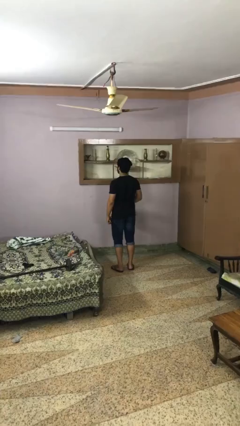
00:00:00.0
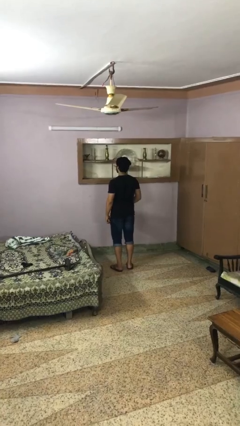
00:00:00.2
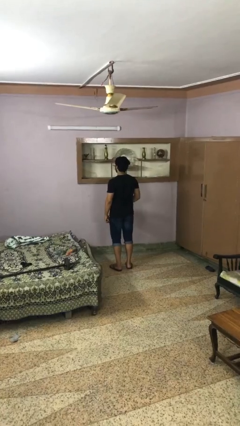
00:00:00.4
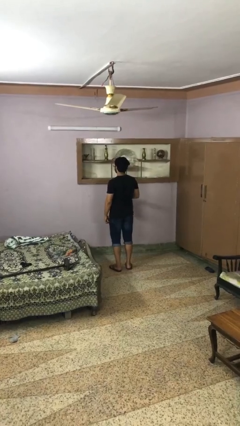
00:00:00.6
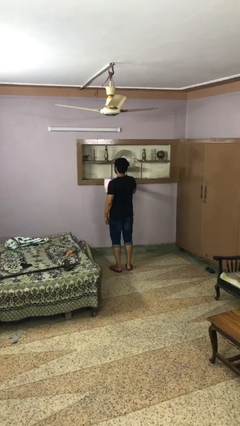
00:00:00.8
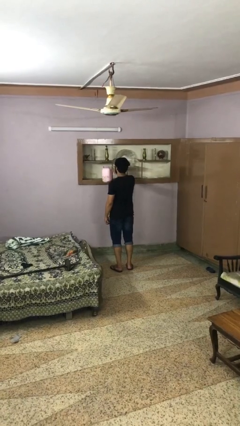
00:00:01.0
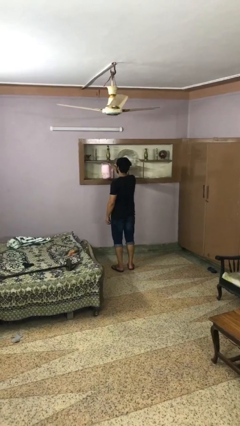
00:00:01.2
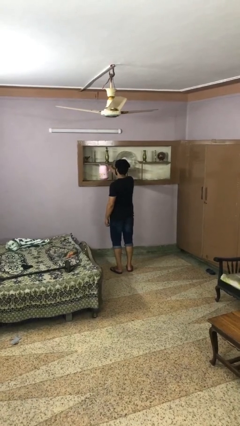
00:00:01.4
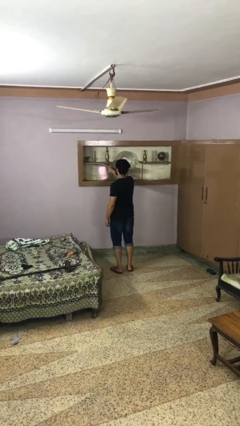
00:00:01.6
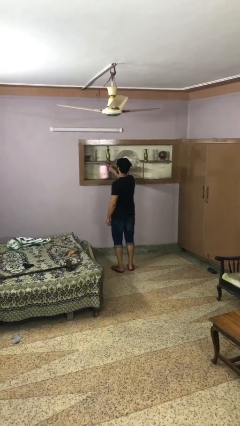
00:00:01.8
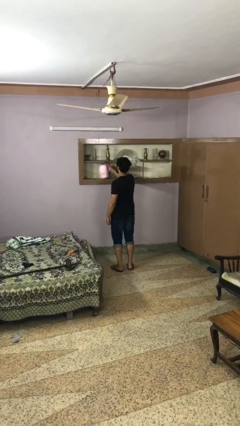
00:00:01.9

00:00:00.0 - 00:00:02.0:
person puts down object on countertop

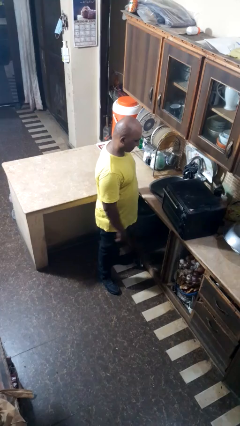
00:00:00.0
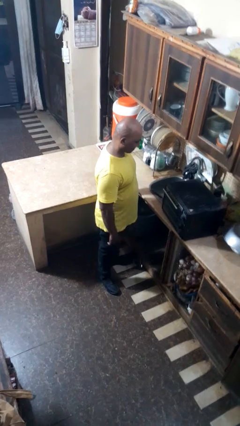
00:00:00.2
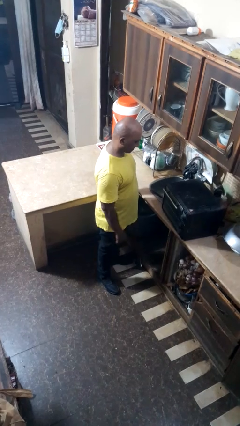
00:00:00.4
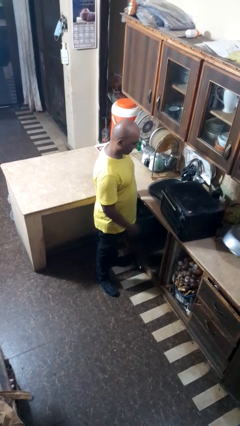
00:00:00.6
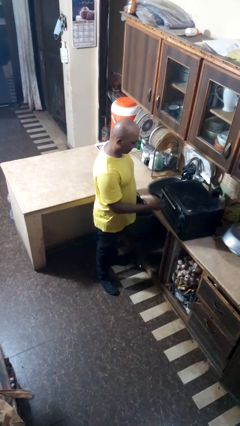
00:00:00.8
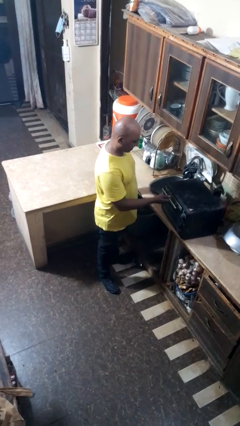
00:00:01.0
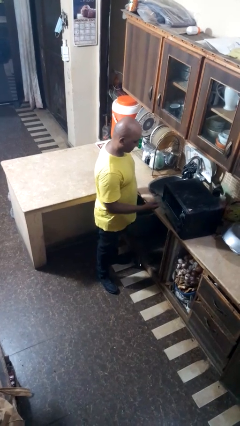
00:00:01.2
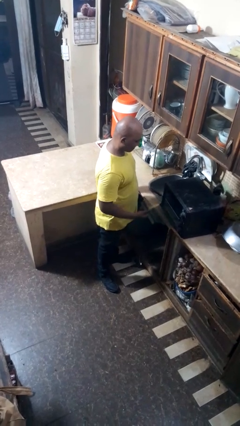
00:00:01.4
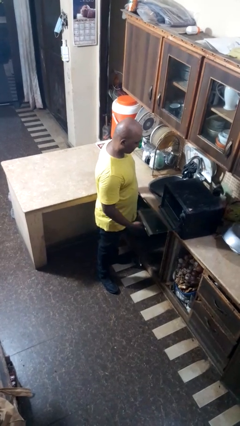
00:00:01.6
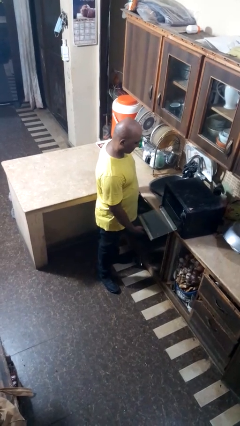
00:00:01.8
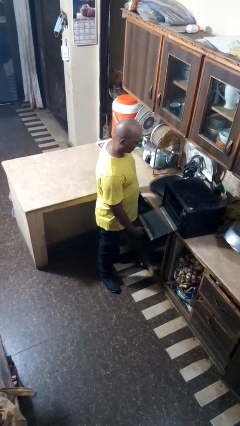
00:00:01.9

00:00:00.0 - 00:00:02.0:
person opens oven door

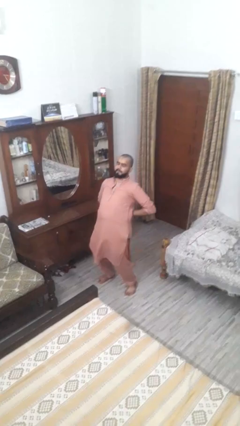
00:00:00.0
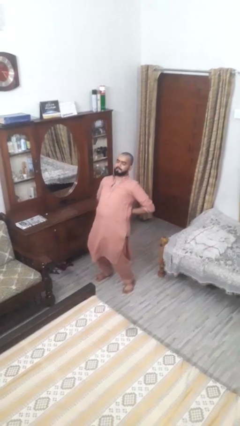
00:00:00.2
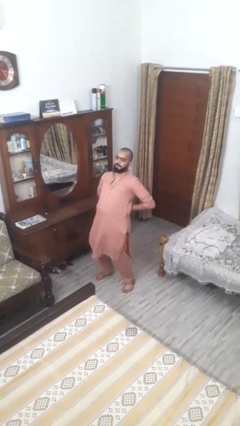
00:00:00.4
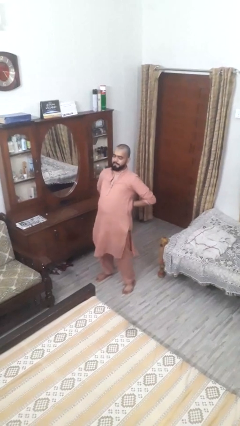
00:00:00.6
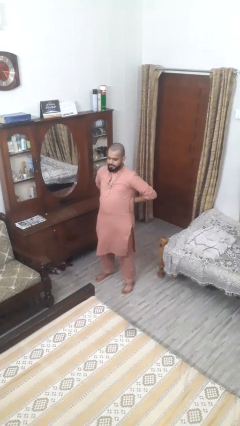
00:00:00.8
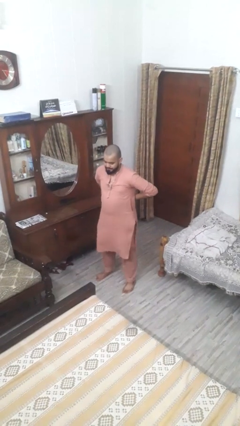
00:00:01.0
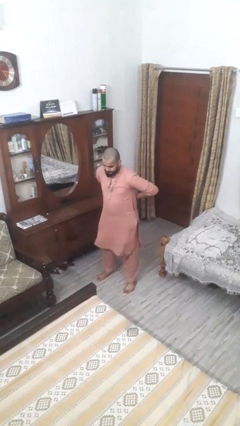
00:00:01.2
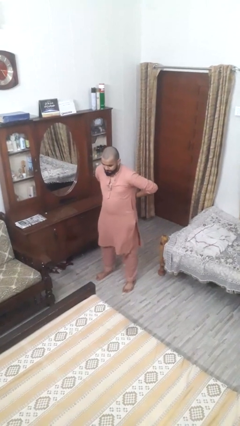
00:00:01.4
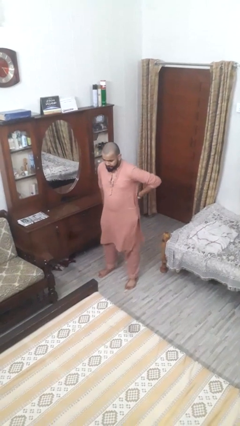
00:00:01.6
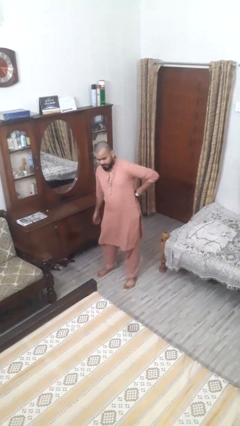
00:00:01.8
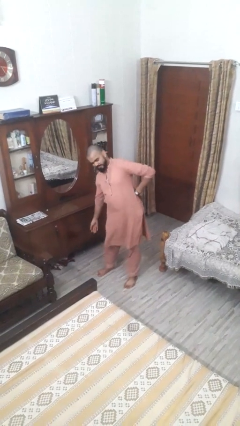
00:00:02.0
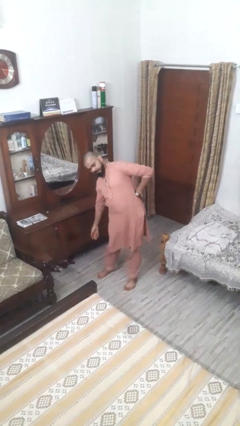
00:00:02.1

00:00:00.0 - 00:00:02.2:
person stretches back

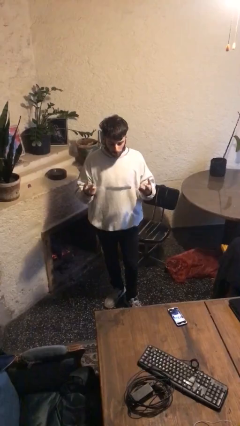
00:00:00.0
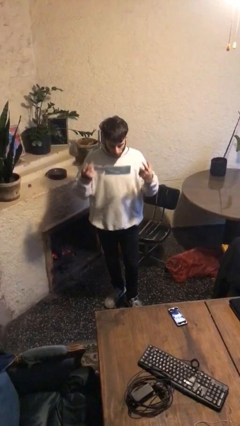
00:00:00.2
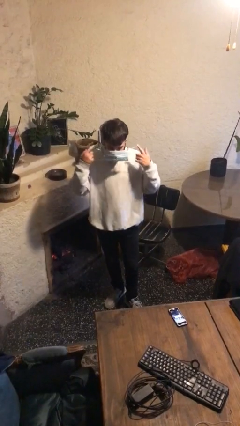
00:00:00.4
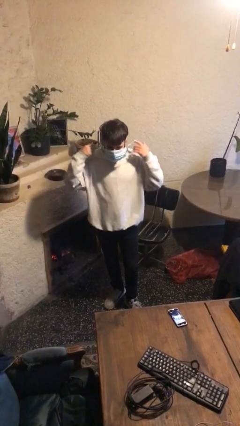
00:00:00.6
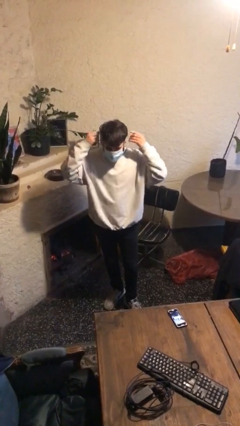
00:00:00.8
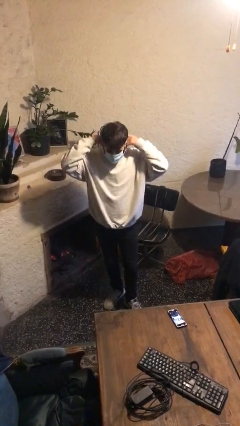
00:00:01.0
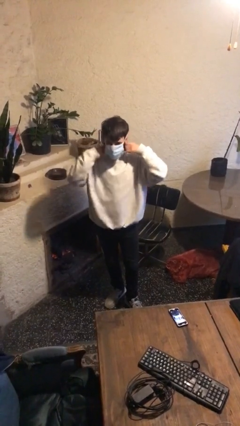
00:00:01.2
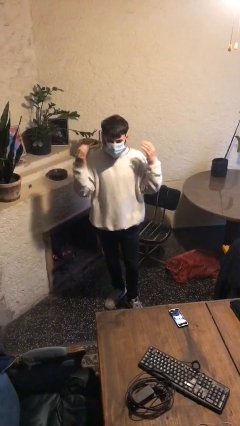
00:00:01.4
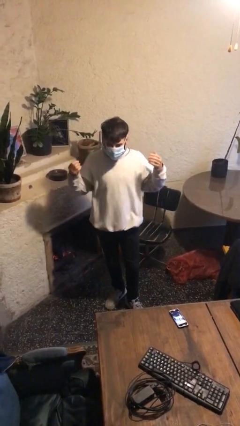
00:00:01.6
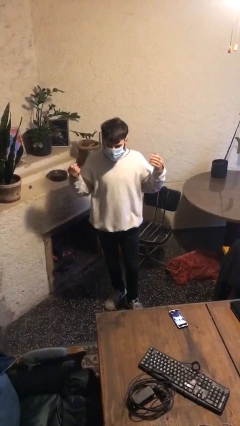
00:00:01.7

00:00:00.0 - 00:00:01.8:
person puts on facemask

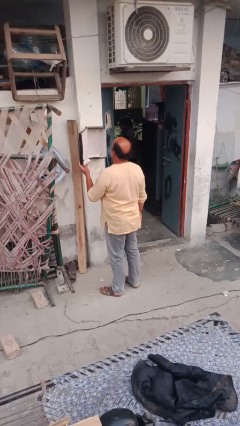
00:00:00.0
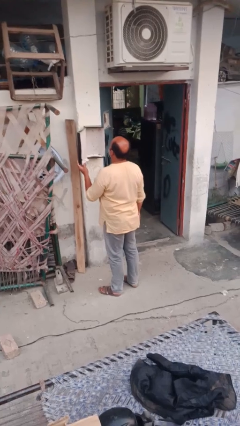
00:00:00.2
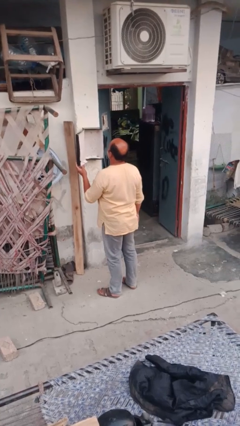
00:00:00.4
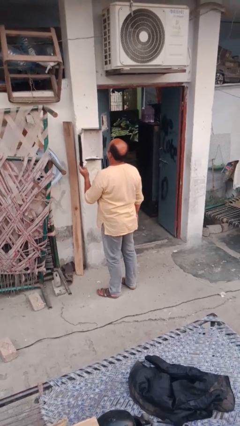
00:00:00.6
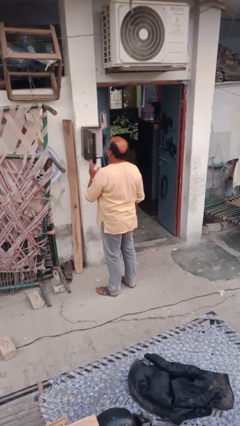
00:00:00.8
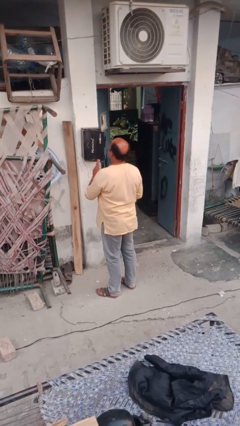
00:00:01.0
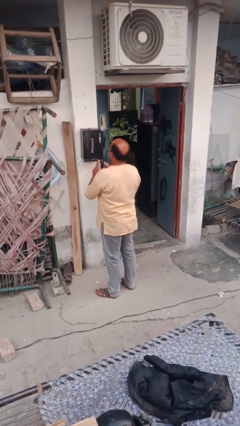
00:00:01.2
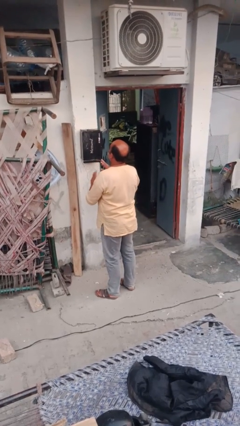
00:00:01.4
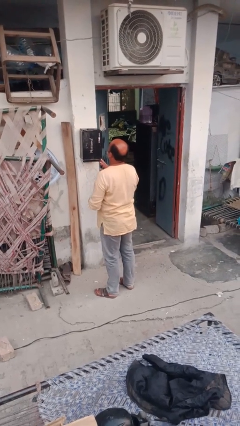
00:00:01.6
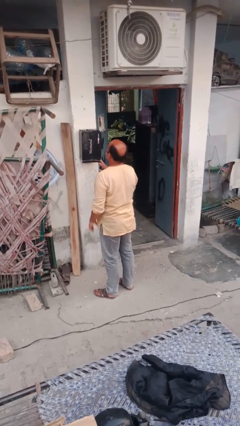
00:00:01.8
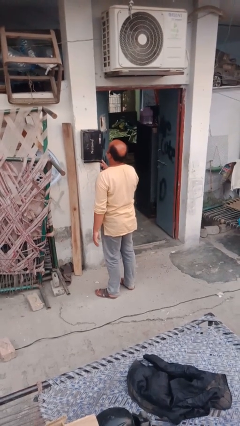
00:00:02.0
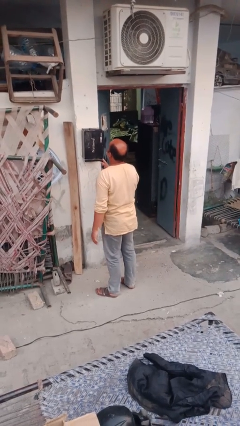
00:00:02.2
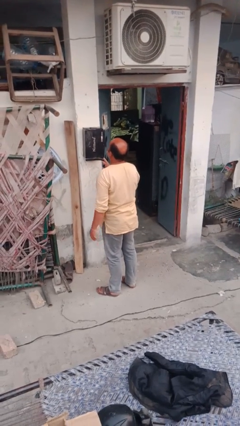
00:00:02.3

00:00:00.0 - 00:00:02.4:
person closes mailbox

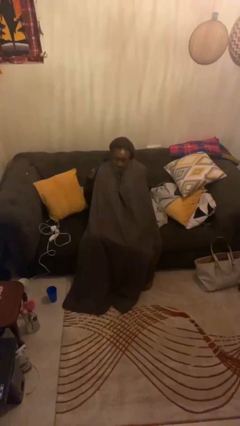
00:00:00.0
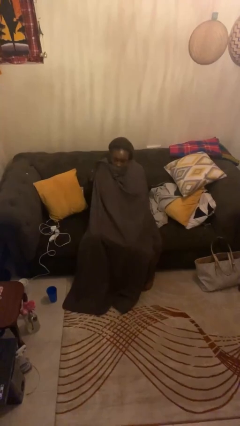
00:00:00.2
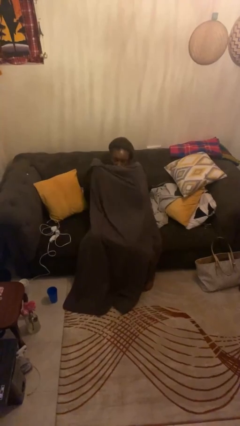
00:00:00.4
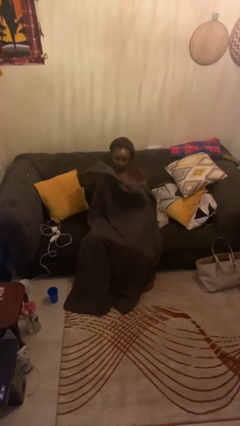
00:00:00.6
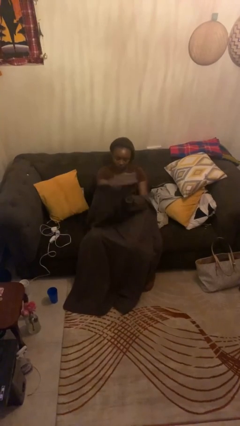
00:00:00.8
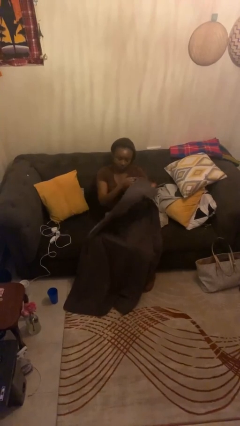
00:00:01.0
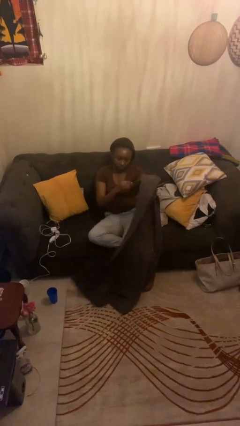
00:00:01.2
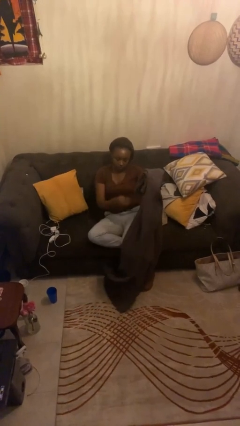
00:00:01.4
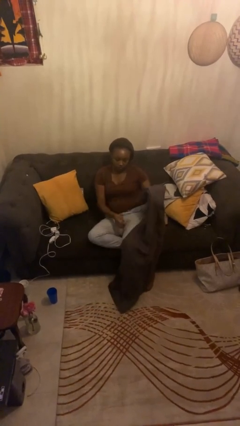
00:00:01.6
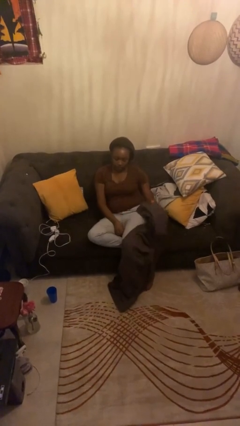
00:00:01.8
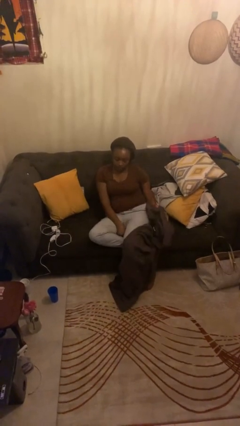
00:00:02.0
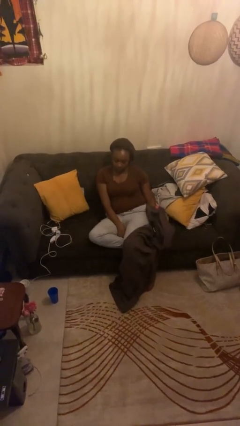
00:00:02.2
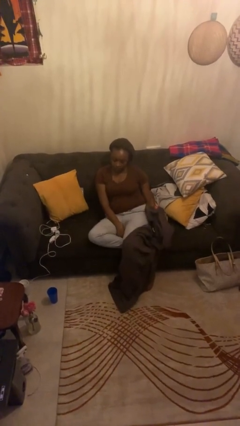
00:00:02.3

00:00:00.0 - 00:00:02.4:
person uncovers with blanket

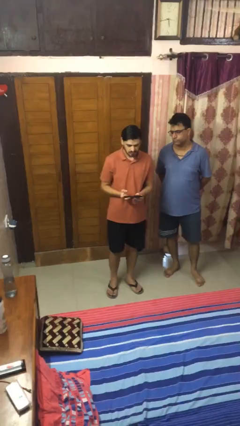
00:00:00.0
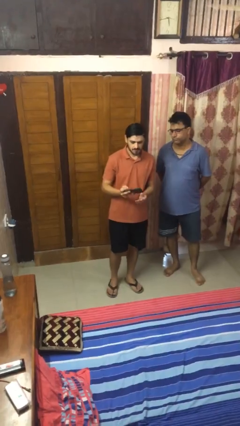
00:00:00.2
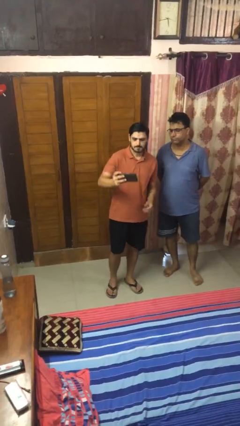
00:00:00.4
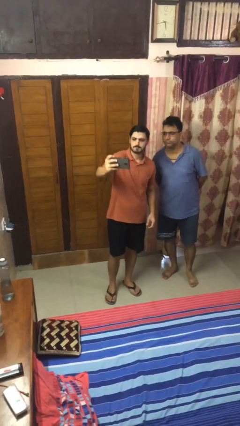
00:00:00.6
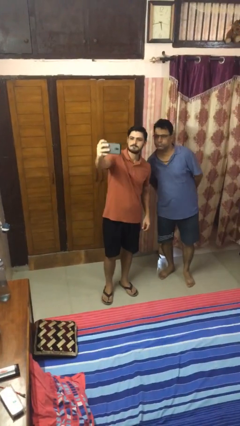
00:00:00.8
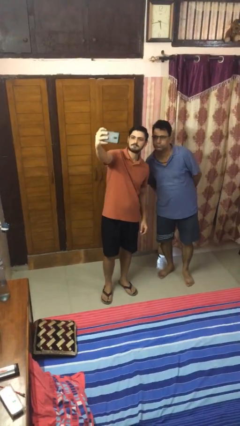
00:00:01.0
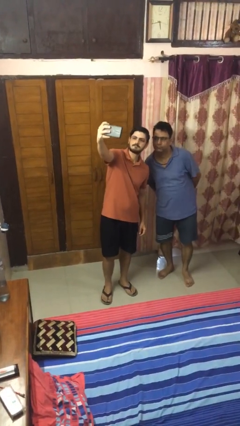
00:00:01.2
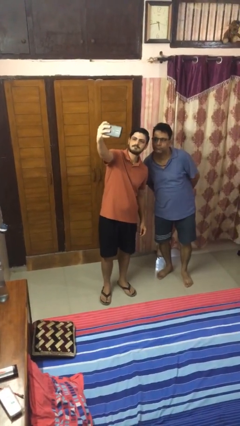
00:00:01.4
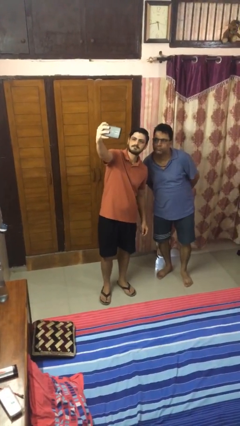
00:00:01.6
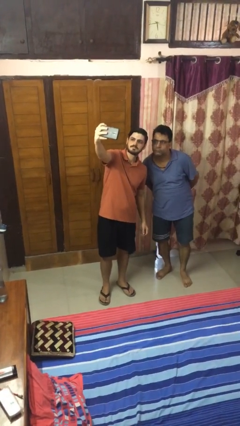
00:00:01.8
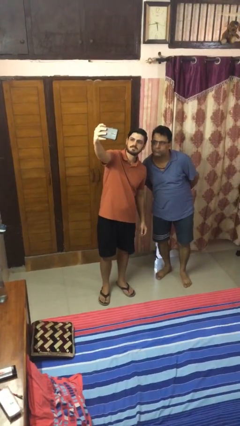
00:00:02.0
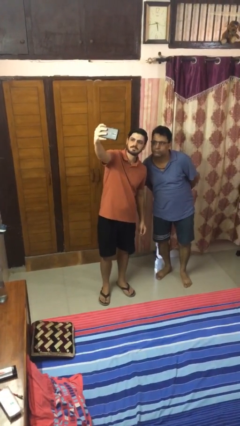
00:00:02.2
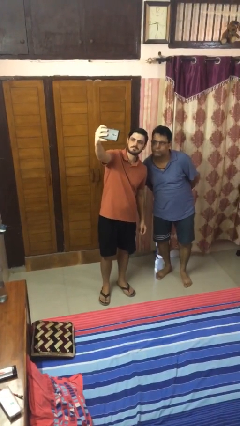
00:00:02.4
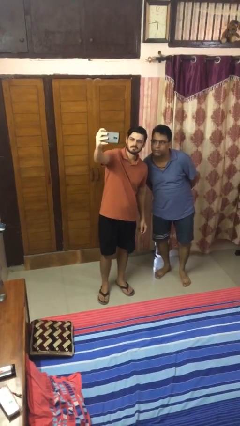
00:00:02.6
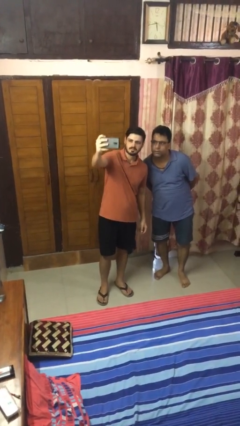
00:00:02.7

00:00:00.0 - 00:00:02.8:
person takes selfie with person

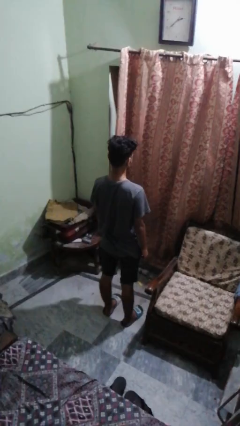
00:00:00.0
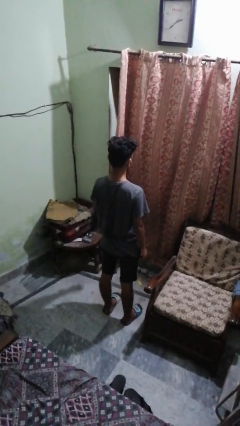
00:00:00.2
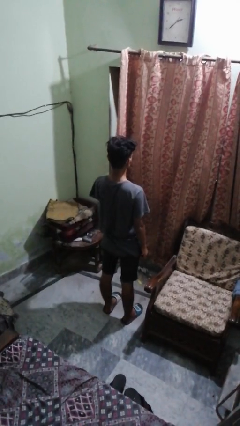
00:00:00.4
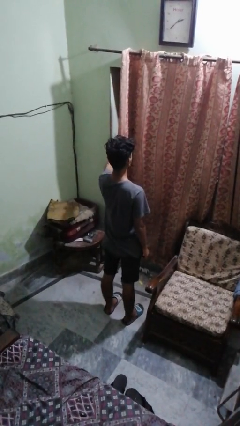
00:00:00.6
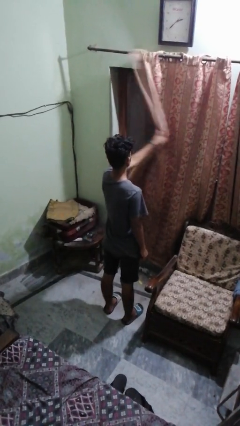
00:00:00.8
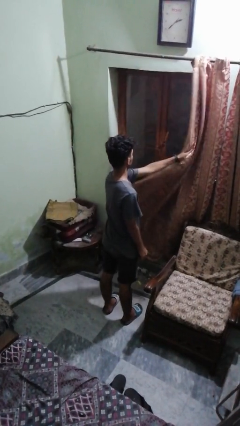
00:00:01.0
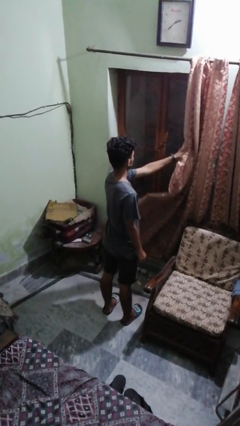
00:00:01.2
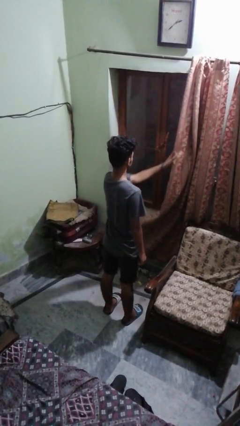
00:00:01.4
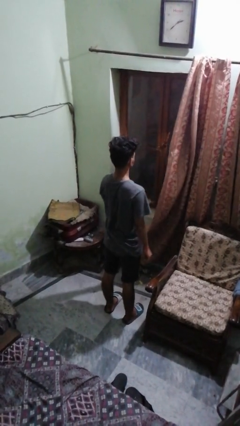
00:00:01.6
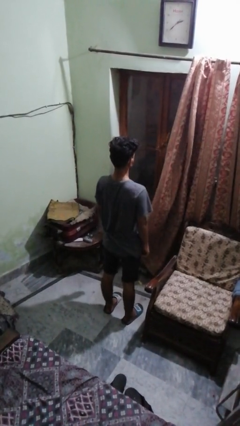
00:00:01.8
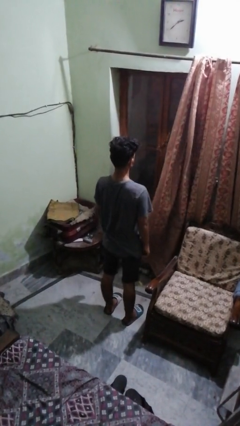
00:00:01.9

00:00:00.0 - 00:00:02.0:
person opens curtains
